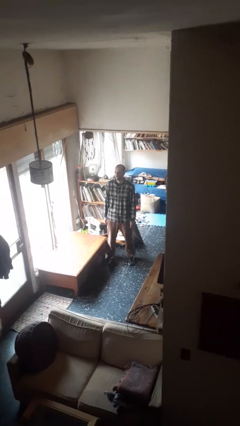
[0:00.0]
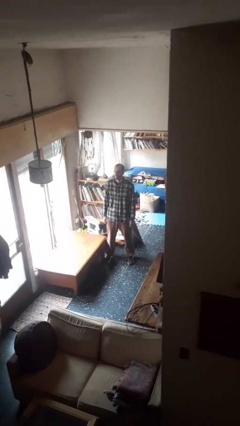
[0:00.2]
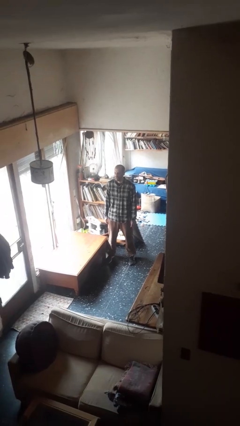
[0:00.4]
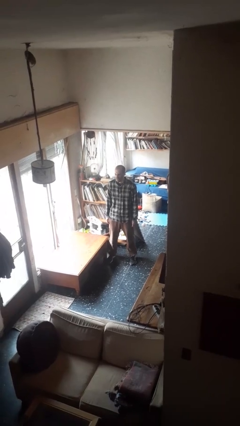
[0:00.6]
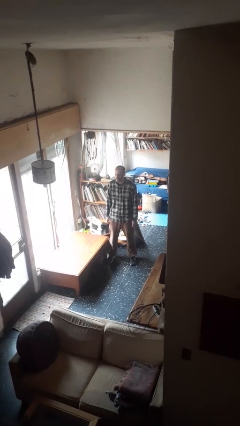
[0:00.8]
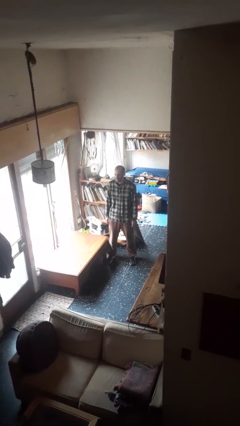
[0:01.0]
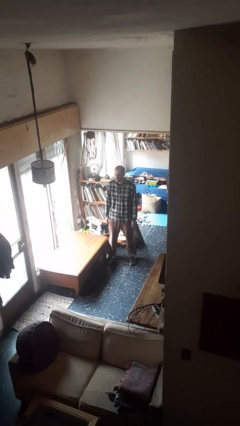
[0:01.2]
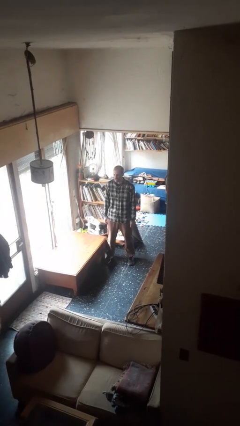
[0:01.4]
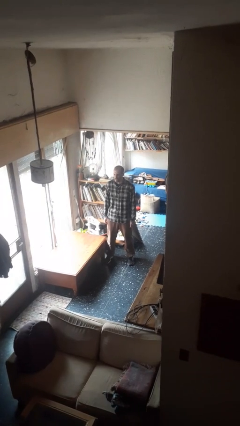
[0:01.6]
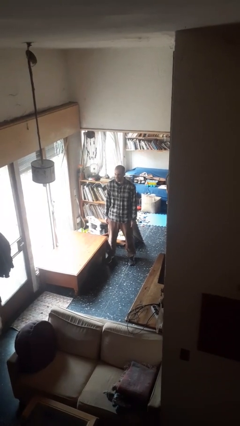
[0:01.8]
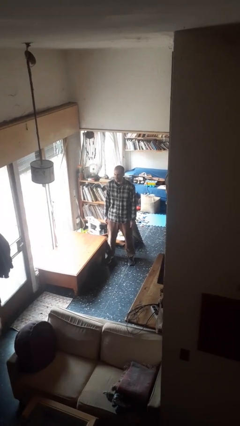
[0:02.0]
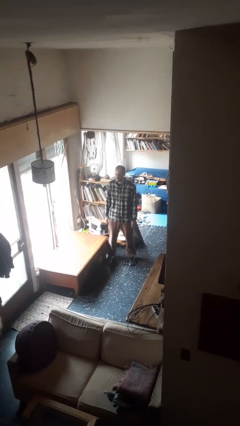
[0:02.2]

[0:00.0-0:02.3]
person sticks out tongue

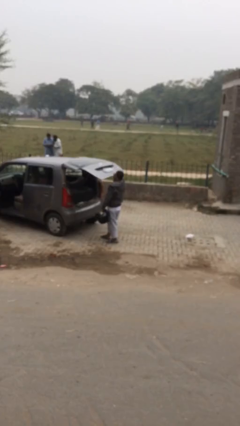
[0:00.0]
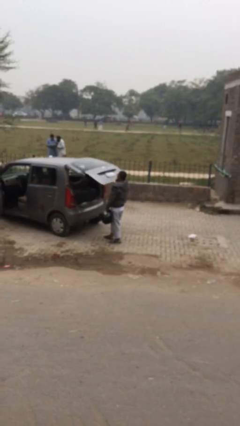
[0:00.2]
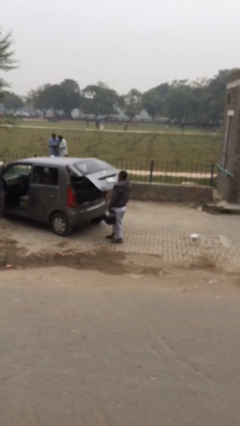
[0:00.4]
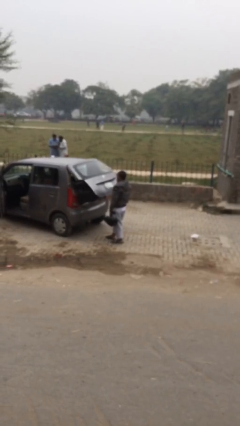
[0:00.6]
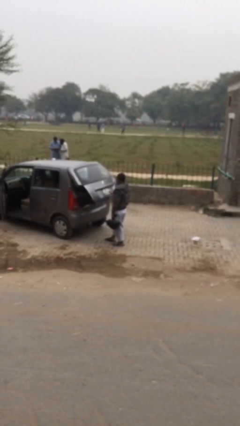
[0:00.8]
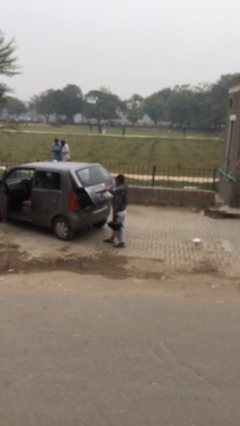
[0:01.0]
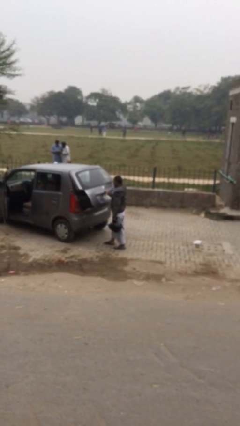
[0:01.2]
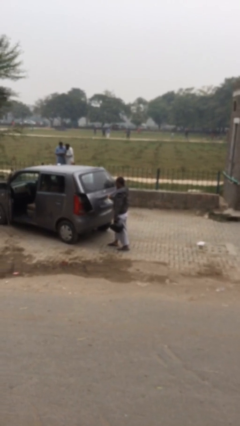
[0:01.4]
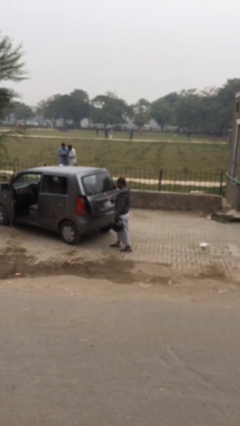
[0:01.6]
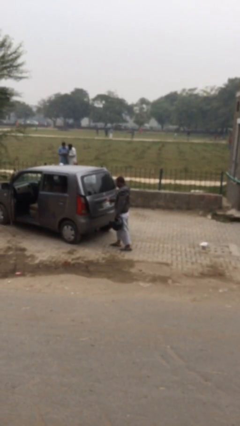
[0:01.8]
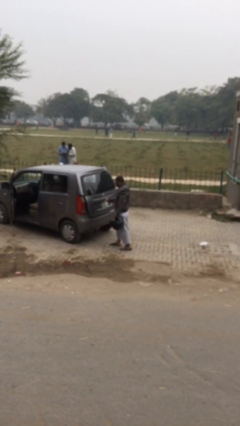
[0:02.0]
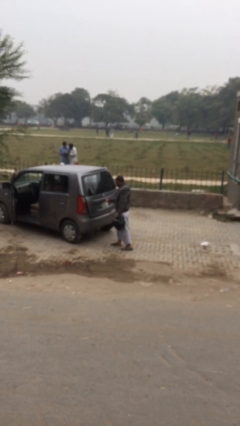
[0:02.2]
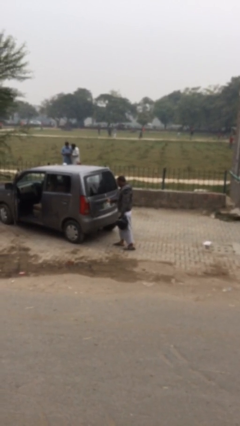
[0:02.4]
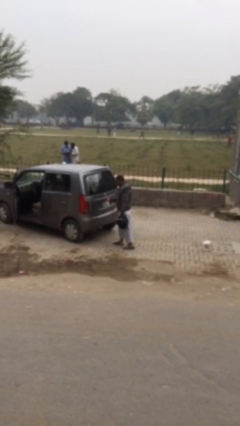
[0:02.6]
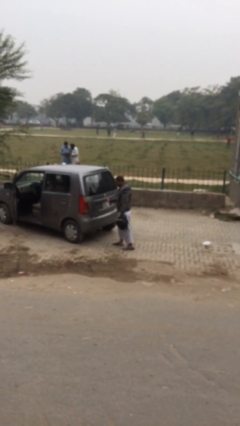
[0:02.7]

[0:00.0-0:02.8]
person closes car trunk

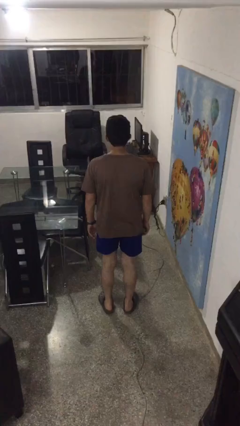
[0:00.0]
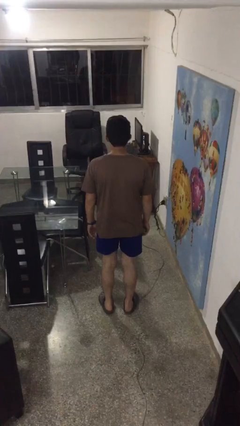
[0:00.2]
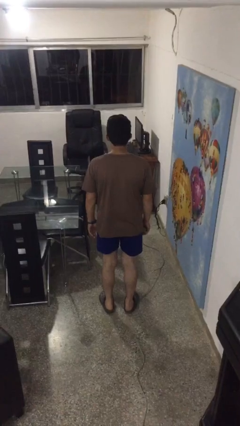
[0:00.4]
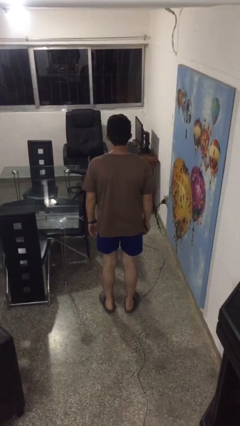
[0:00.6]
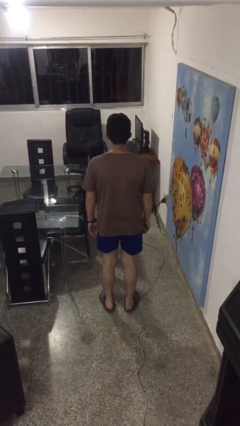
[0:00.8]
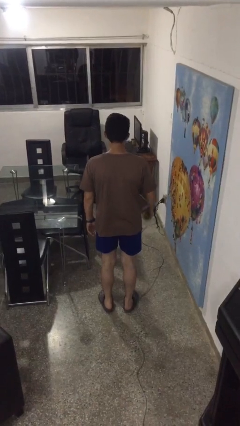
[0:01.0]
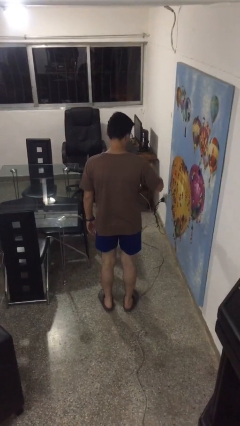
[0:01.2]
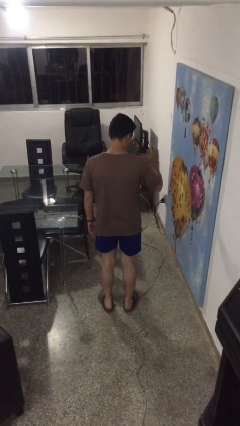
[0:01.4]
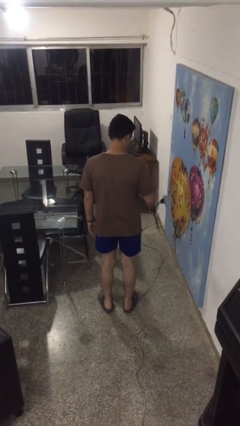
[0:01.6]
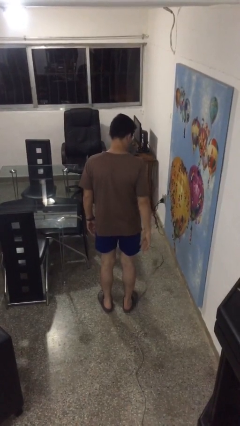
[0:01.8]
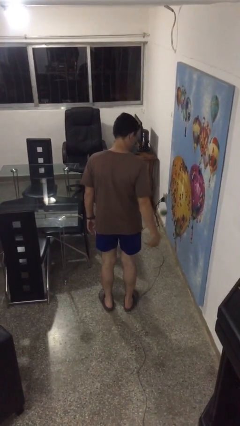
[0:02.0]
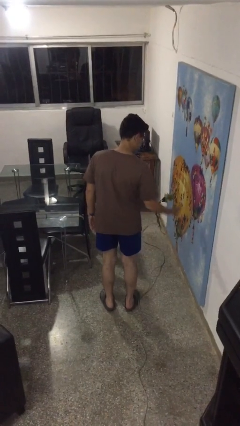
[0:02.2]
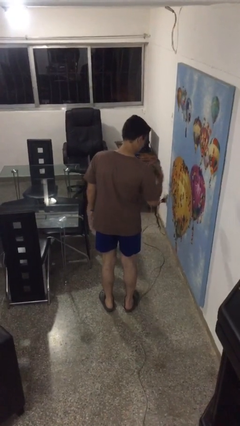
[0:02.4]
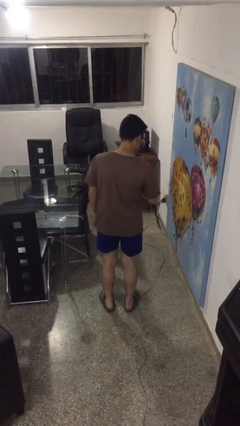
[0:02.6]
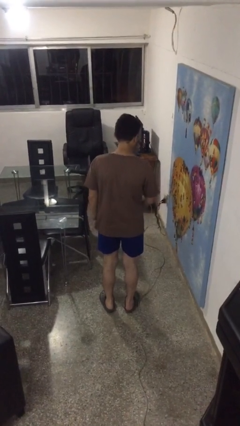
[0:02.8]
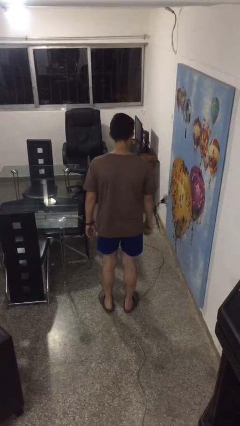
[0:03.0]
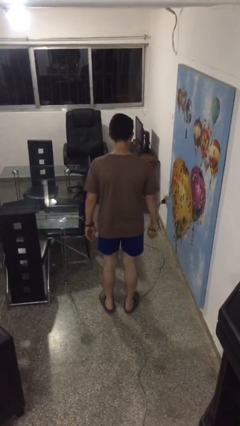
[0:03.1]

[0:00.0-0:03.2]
person bounces ball on floor

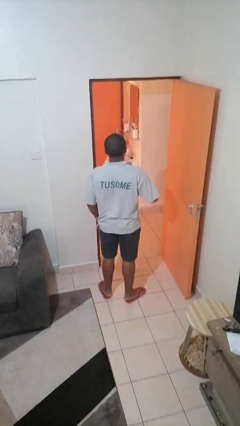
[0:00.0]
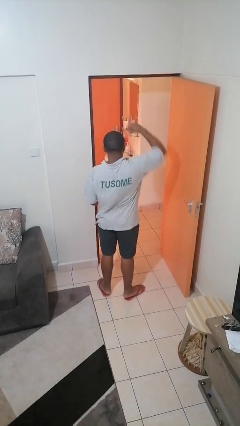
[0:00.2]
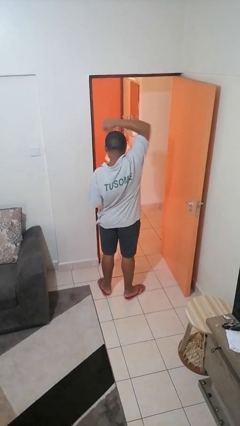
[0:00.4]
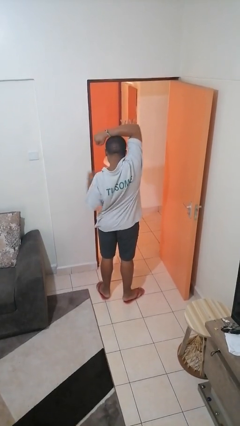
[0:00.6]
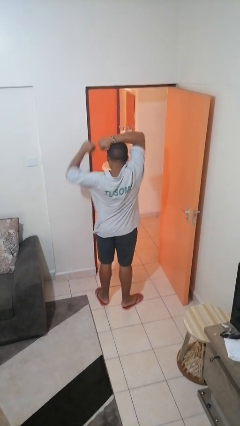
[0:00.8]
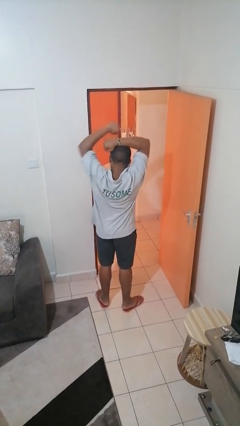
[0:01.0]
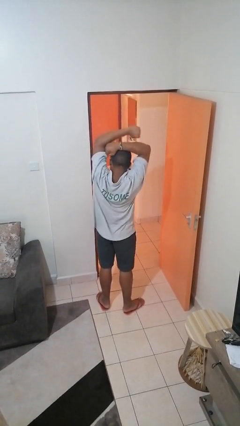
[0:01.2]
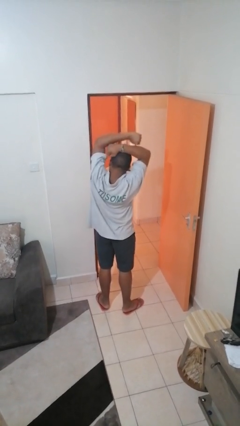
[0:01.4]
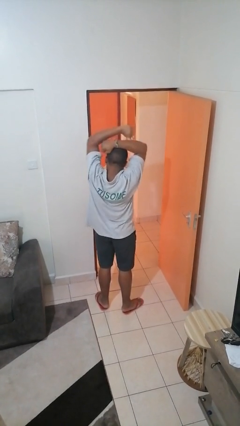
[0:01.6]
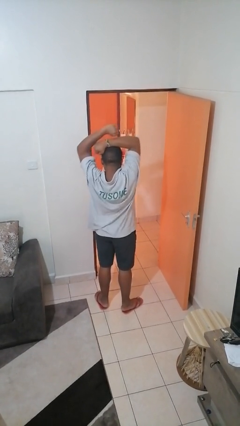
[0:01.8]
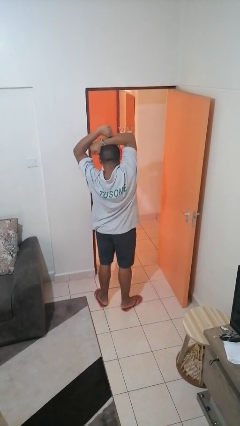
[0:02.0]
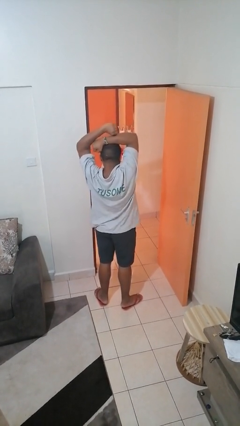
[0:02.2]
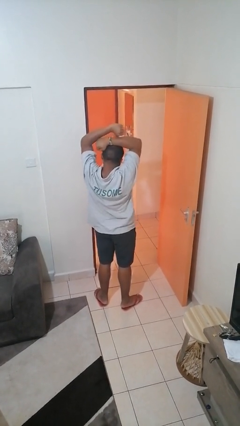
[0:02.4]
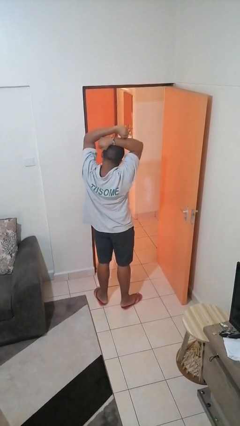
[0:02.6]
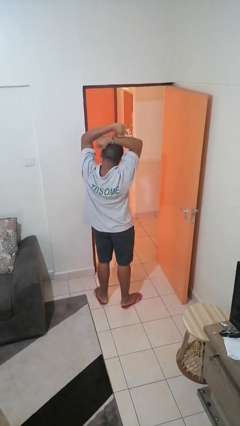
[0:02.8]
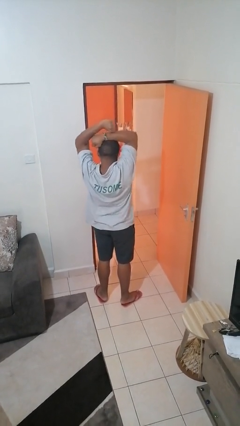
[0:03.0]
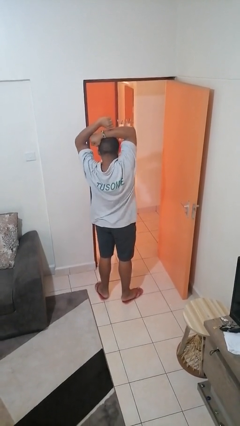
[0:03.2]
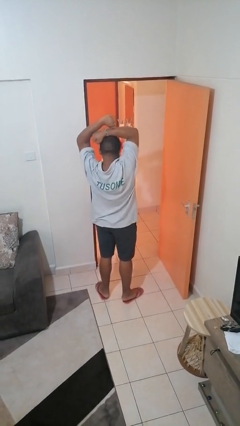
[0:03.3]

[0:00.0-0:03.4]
person stretches arms over head

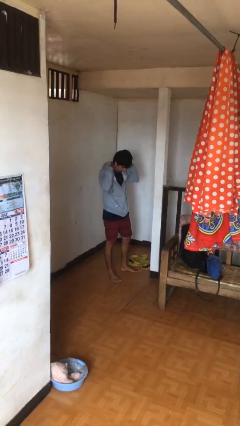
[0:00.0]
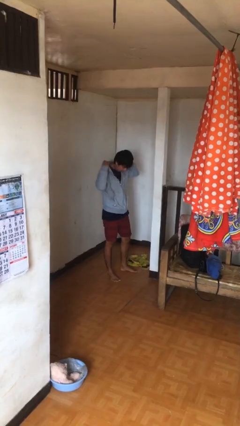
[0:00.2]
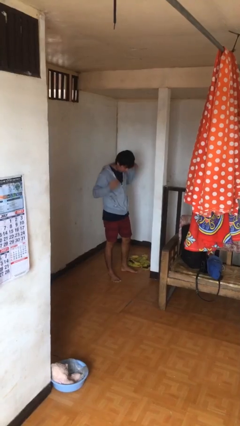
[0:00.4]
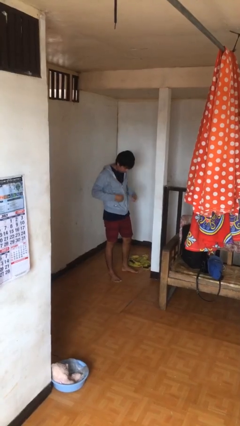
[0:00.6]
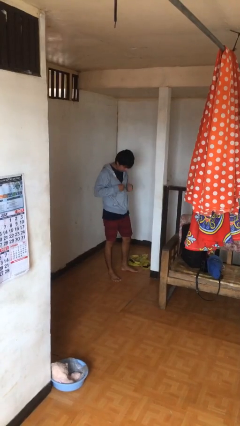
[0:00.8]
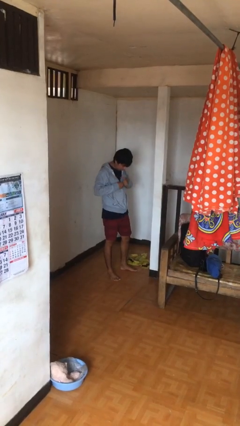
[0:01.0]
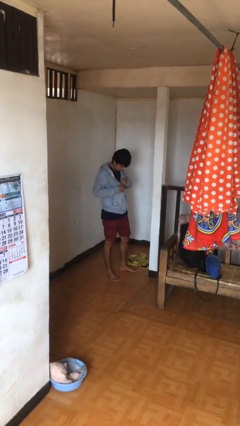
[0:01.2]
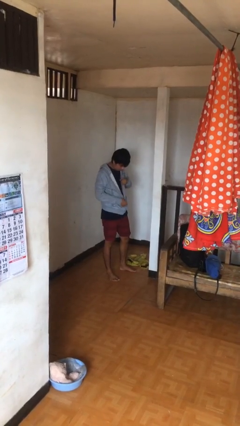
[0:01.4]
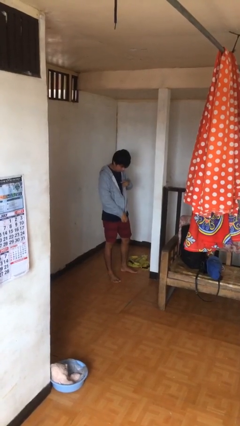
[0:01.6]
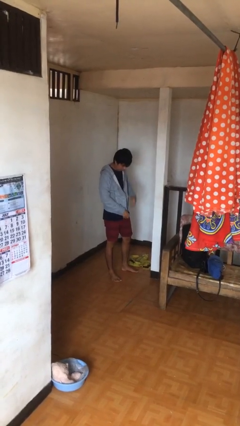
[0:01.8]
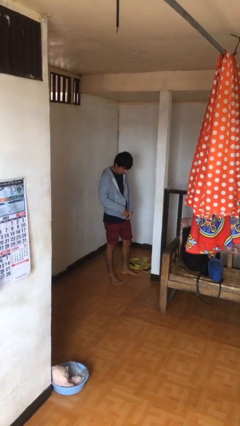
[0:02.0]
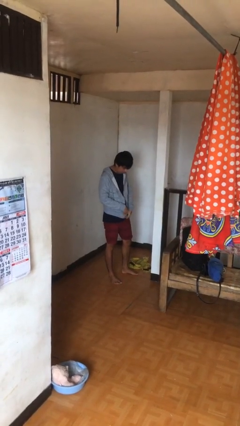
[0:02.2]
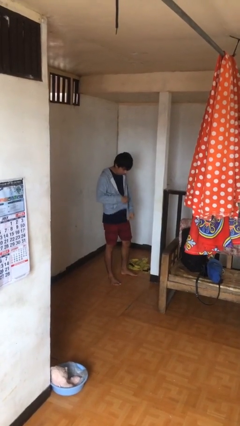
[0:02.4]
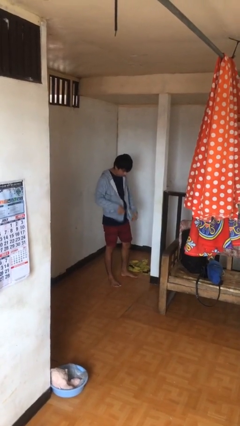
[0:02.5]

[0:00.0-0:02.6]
person unzips jacket

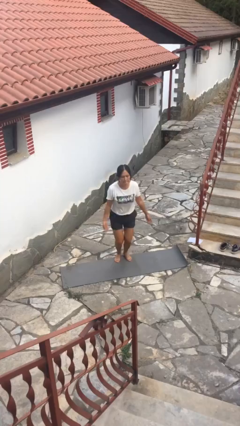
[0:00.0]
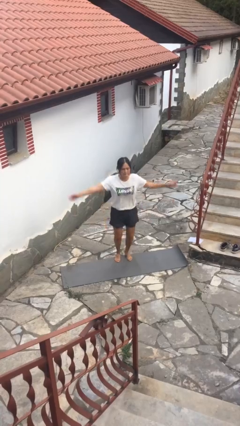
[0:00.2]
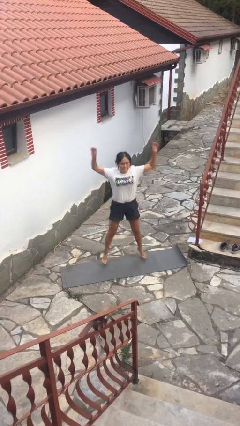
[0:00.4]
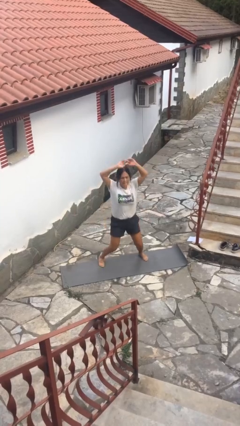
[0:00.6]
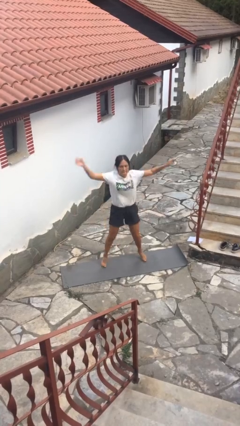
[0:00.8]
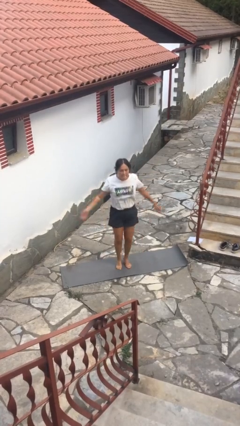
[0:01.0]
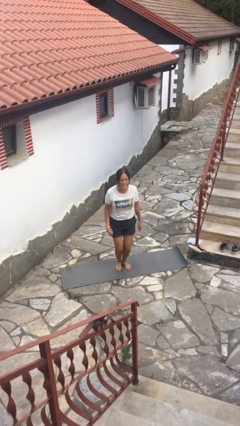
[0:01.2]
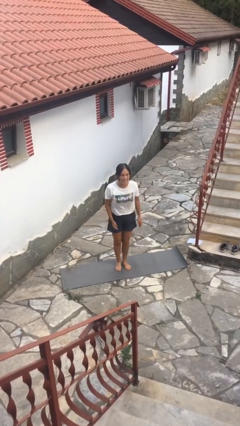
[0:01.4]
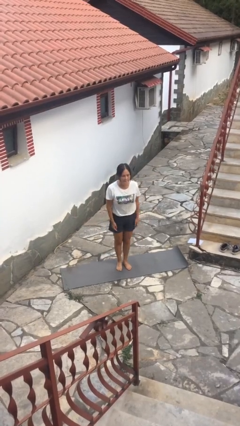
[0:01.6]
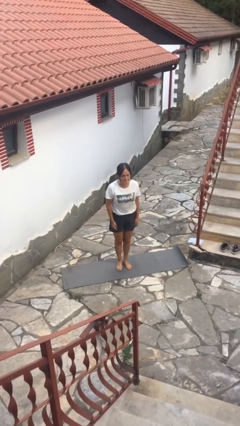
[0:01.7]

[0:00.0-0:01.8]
person exercises with jumping jacks

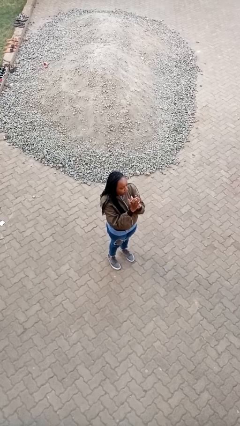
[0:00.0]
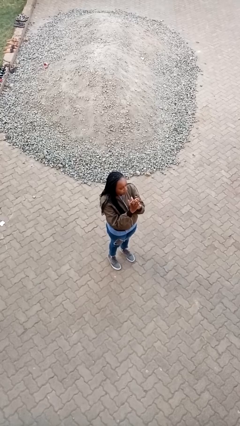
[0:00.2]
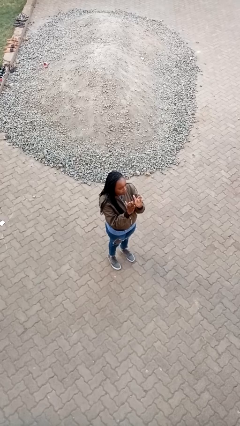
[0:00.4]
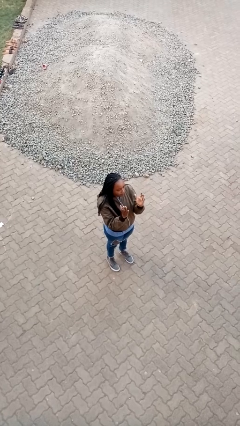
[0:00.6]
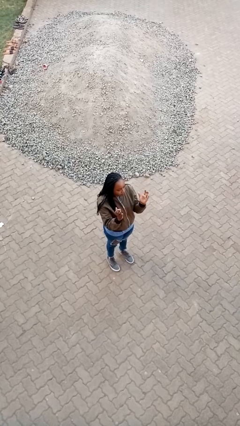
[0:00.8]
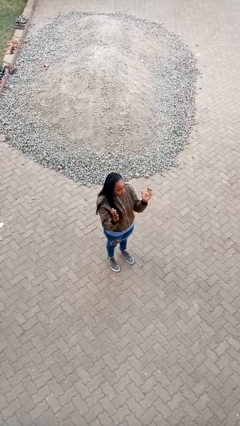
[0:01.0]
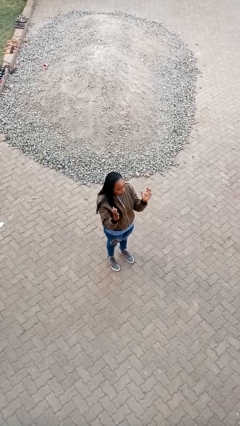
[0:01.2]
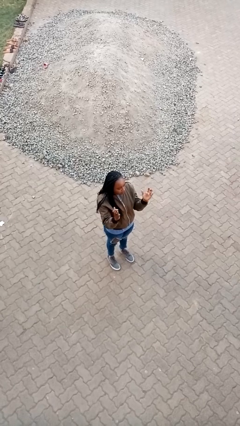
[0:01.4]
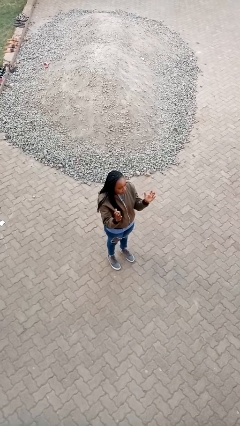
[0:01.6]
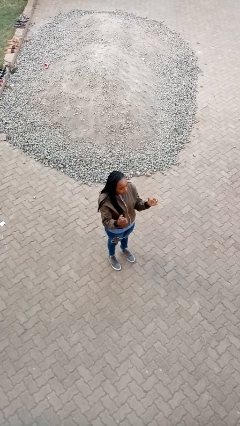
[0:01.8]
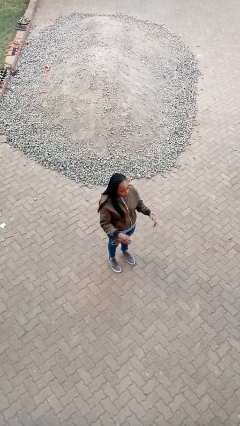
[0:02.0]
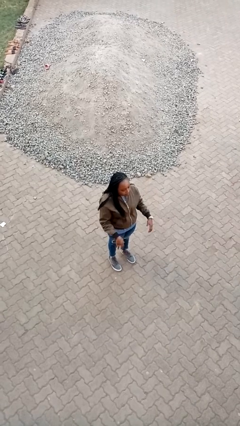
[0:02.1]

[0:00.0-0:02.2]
person gestures zoom out
